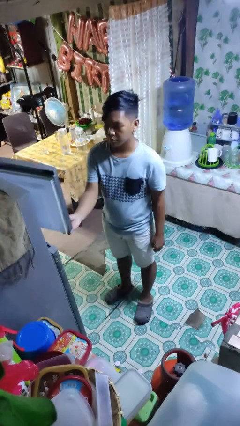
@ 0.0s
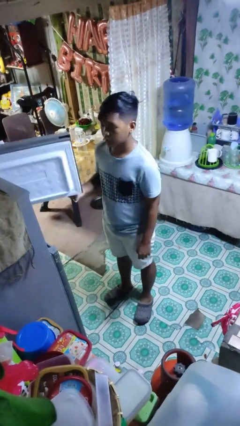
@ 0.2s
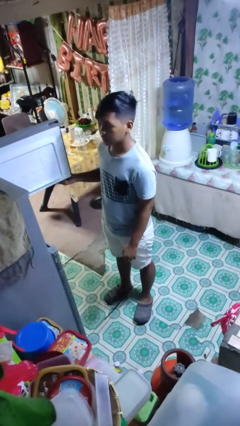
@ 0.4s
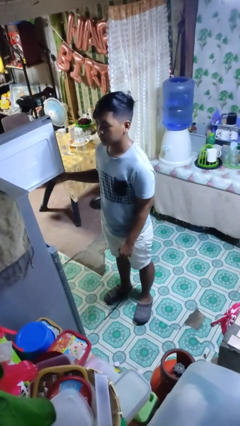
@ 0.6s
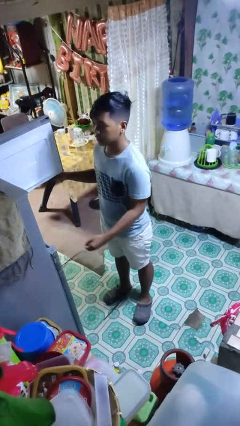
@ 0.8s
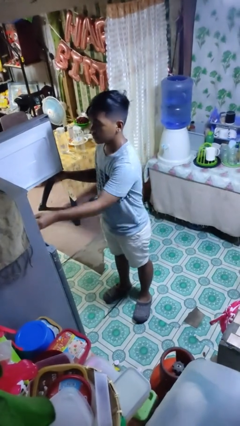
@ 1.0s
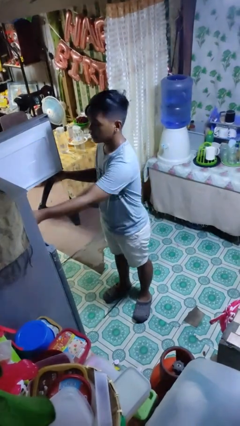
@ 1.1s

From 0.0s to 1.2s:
person opens refrigerator

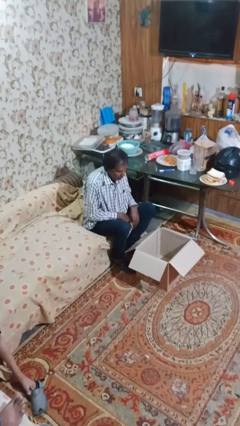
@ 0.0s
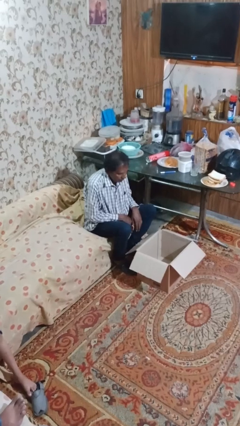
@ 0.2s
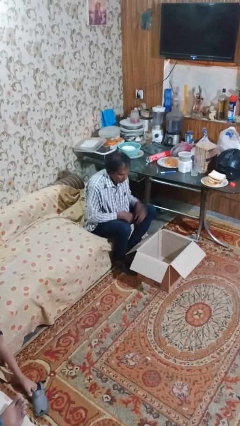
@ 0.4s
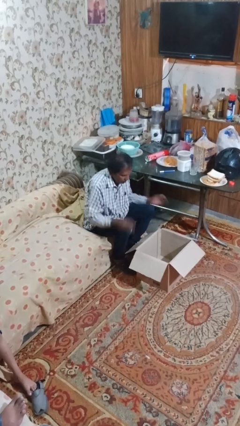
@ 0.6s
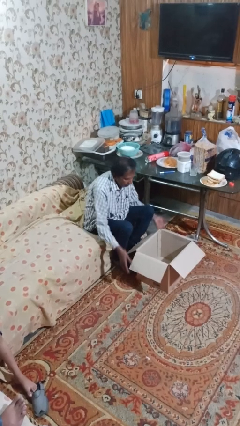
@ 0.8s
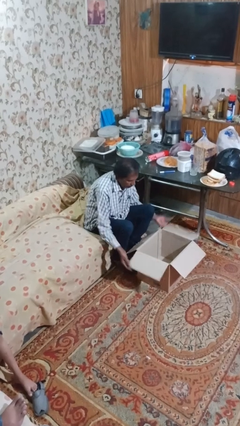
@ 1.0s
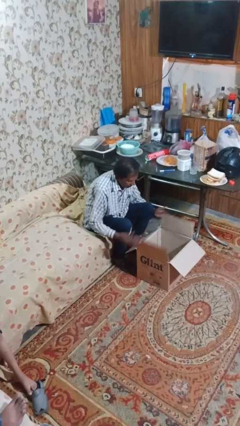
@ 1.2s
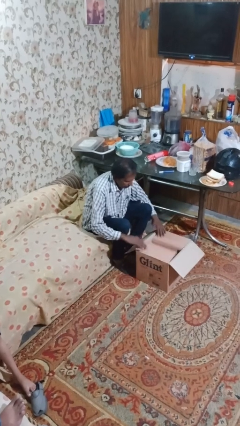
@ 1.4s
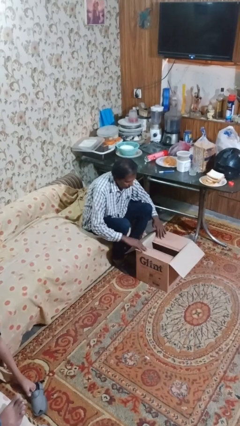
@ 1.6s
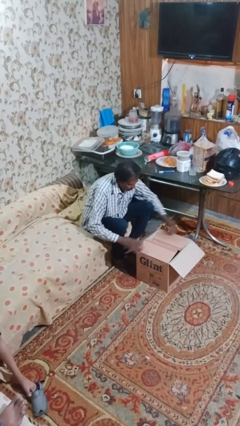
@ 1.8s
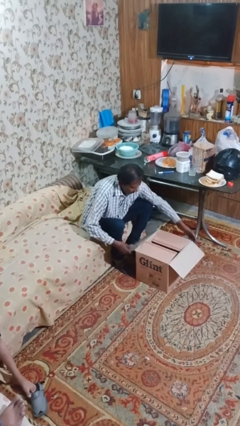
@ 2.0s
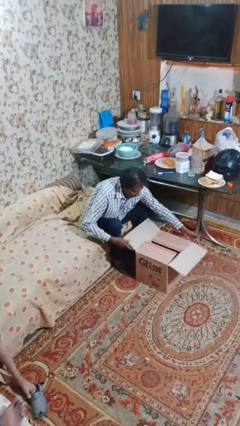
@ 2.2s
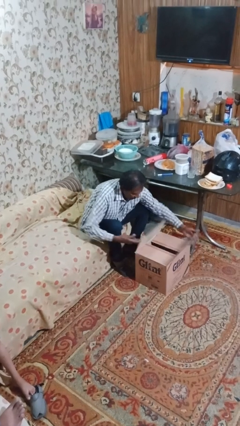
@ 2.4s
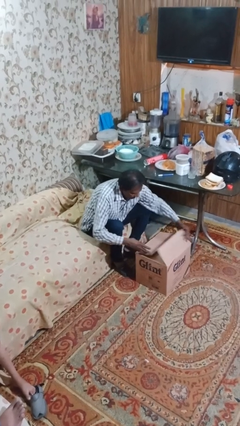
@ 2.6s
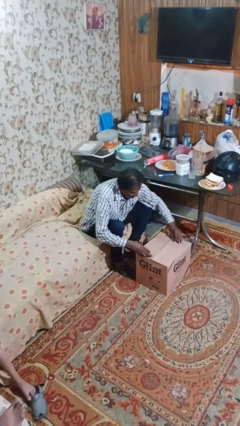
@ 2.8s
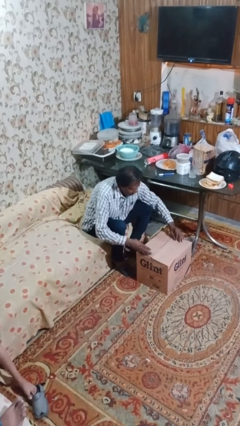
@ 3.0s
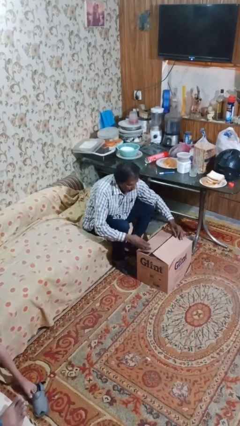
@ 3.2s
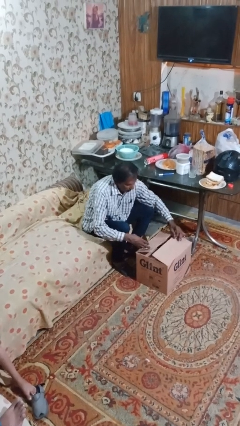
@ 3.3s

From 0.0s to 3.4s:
person closes box

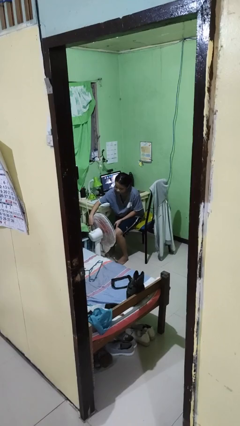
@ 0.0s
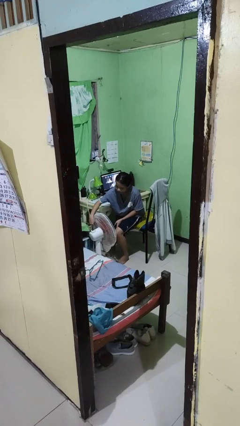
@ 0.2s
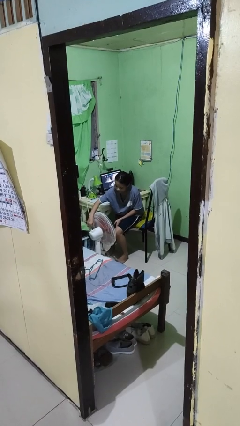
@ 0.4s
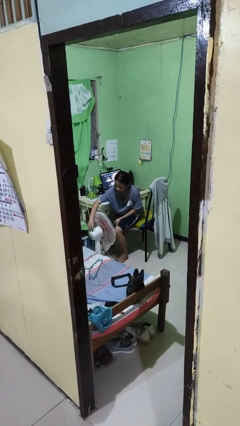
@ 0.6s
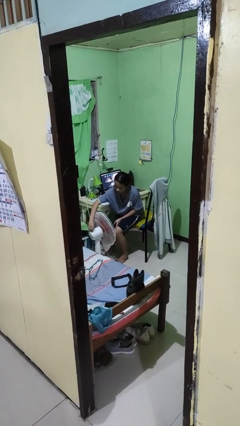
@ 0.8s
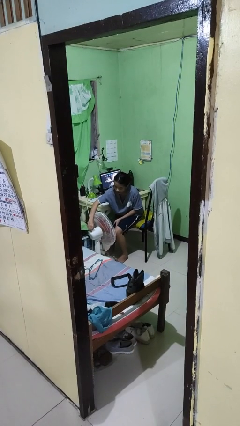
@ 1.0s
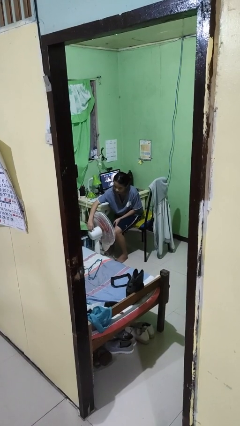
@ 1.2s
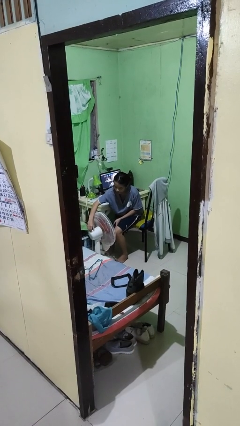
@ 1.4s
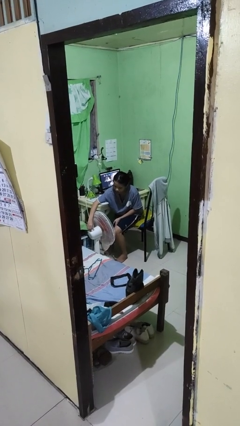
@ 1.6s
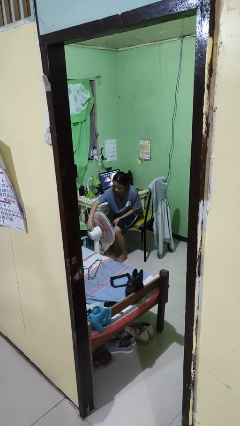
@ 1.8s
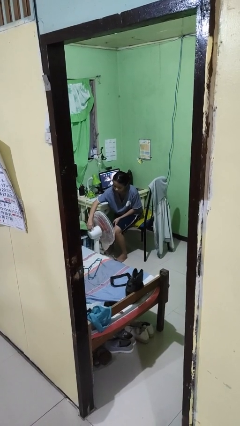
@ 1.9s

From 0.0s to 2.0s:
person turns on fan

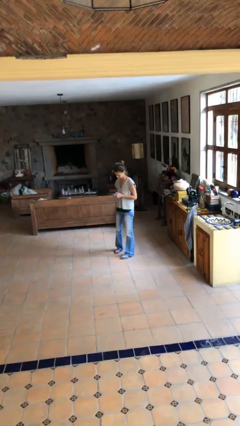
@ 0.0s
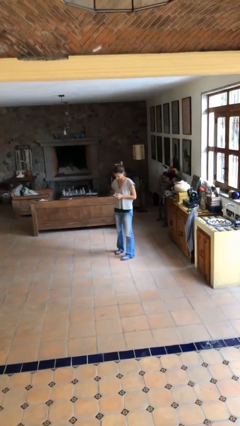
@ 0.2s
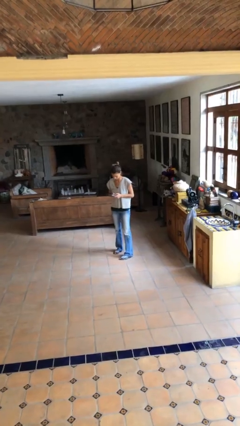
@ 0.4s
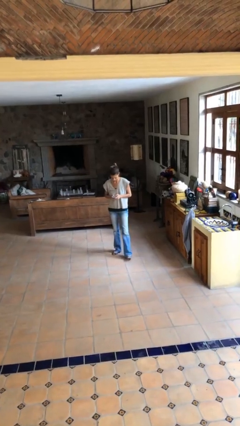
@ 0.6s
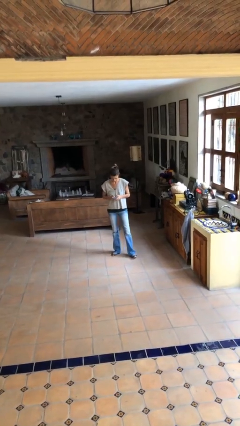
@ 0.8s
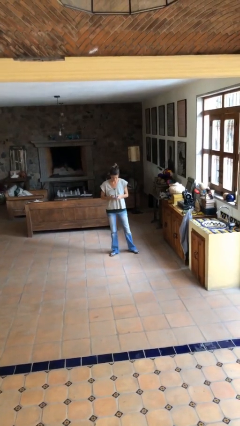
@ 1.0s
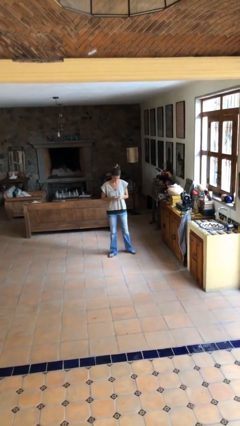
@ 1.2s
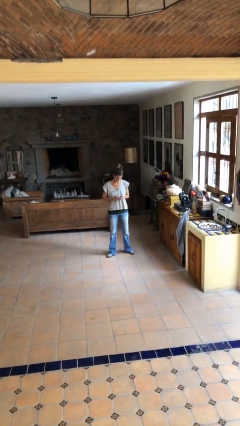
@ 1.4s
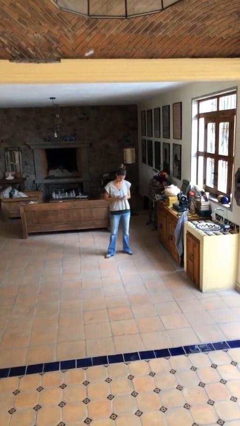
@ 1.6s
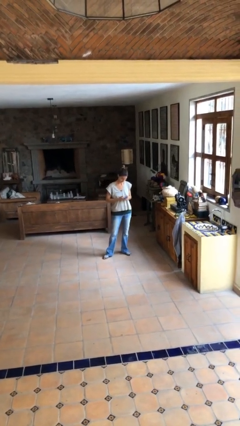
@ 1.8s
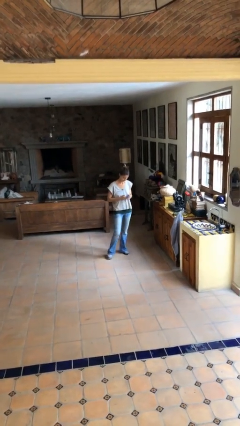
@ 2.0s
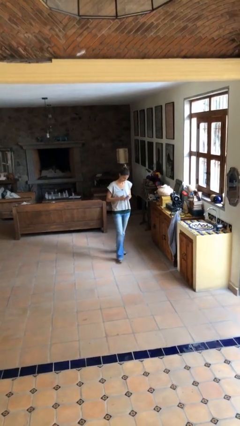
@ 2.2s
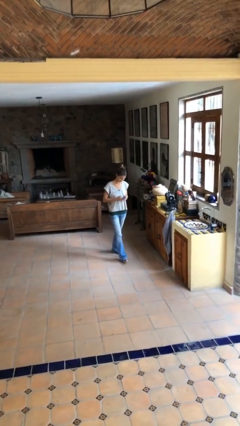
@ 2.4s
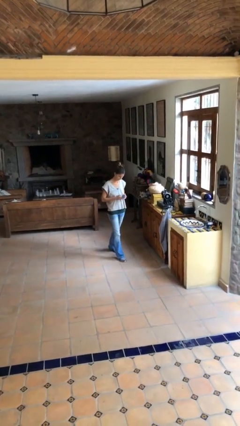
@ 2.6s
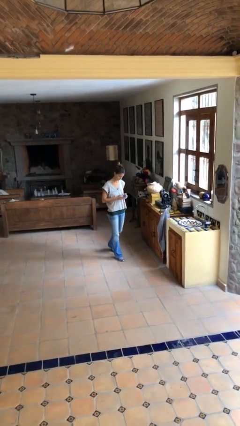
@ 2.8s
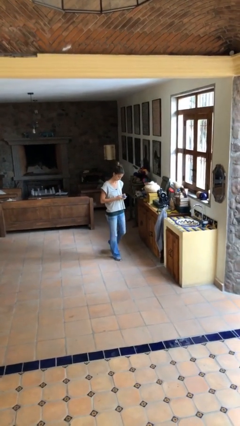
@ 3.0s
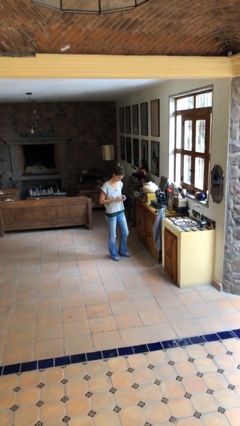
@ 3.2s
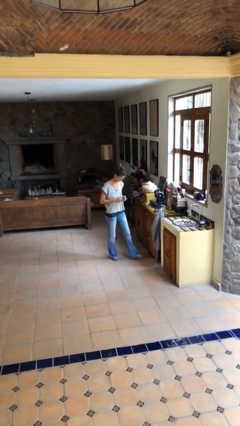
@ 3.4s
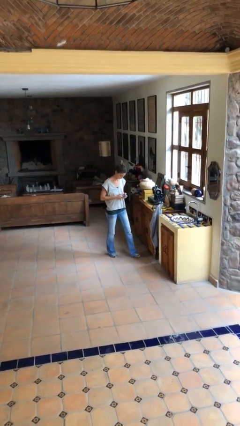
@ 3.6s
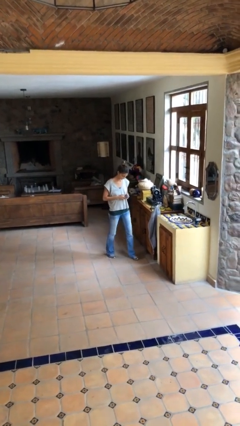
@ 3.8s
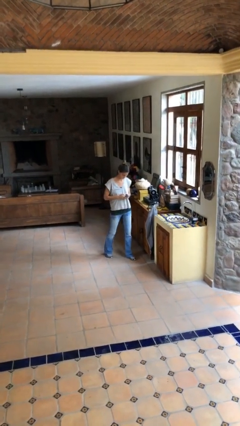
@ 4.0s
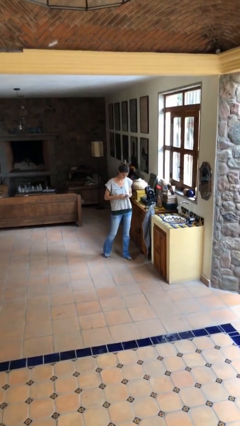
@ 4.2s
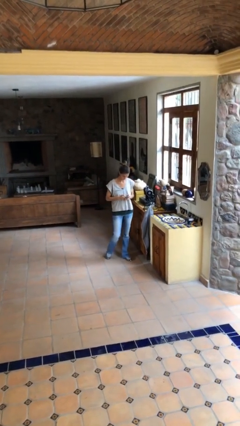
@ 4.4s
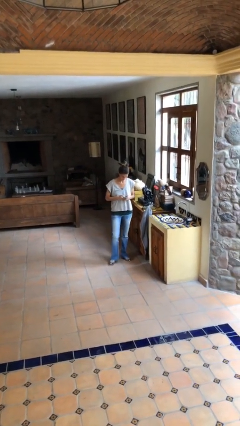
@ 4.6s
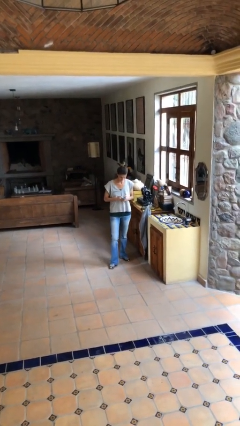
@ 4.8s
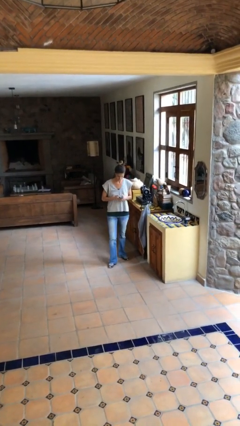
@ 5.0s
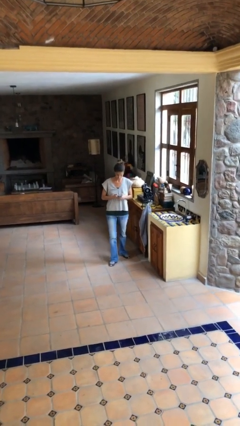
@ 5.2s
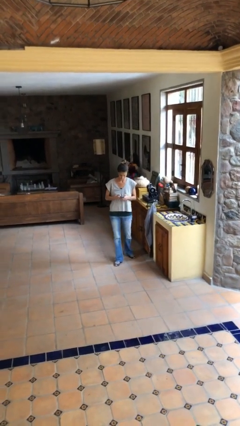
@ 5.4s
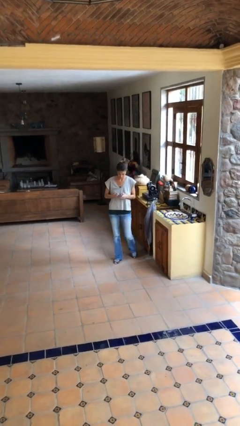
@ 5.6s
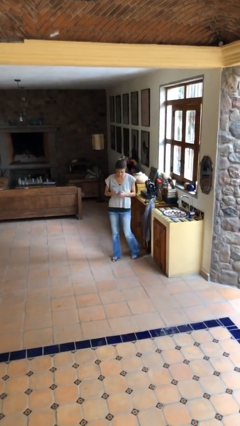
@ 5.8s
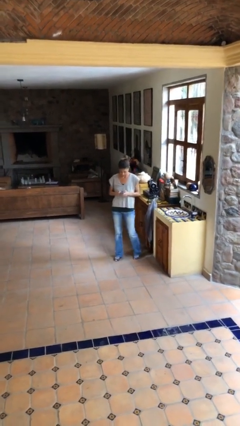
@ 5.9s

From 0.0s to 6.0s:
person texts on phone

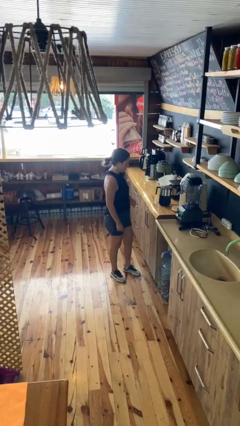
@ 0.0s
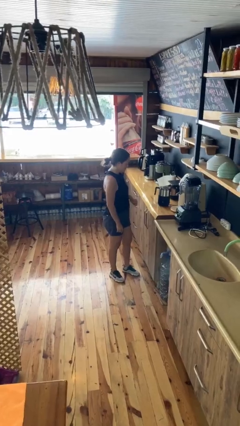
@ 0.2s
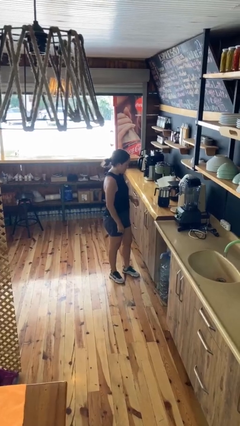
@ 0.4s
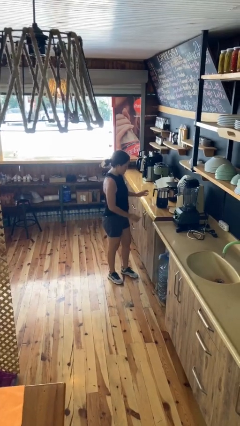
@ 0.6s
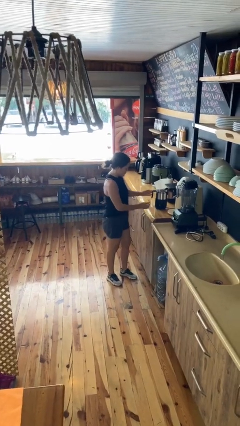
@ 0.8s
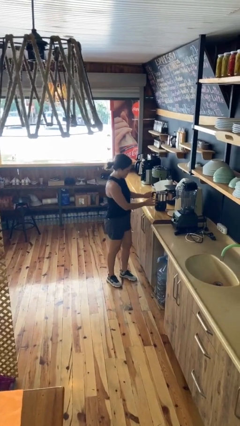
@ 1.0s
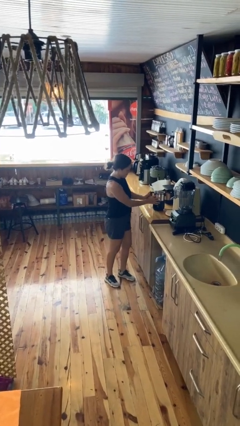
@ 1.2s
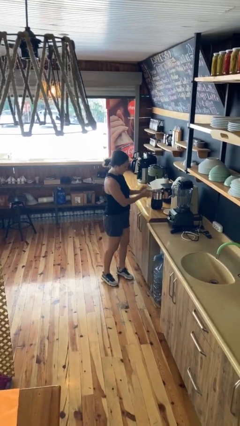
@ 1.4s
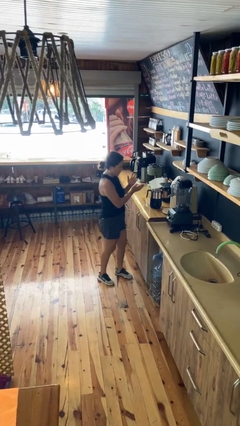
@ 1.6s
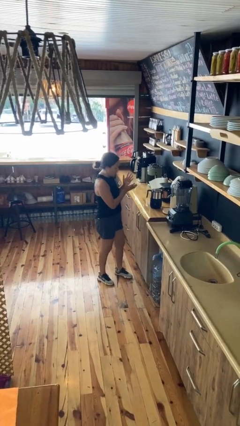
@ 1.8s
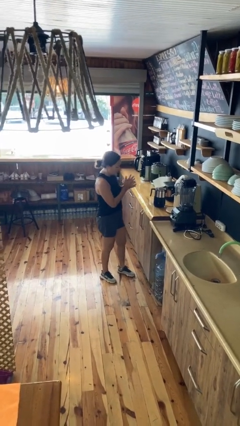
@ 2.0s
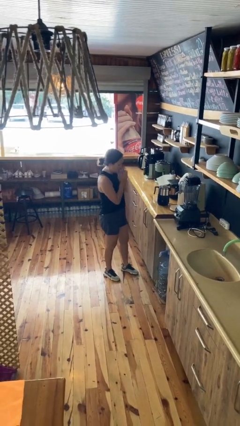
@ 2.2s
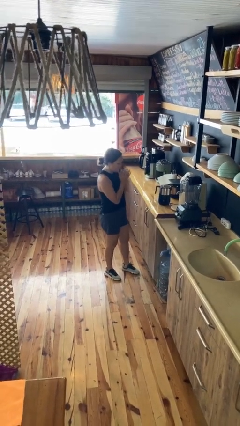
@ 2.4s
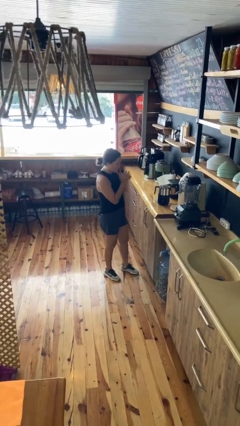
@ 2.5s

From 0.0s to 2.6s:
person burns hand

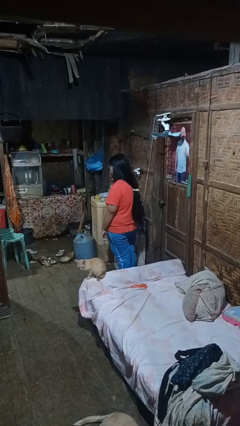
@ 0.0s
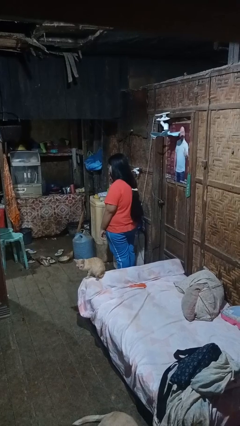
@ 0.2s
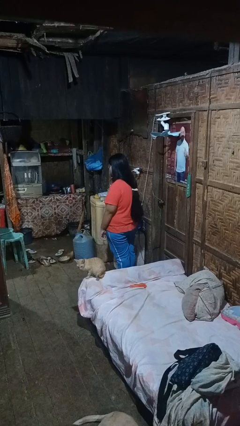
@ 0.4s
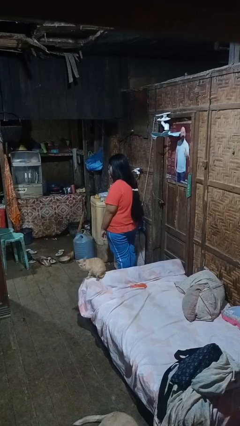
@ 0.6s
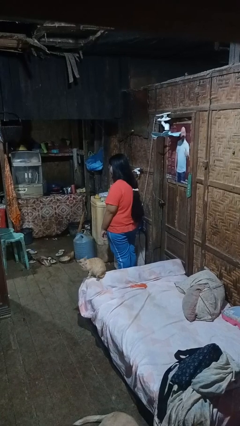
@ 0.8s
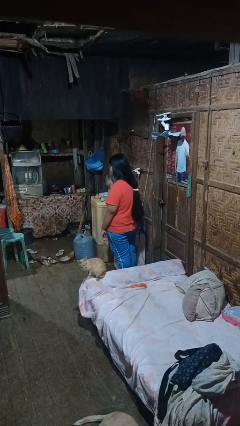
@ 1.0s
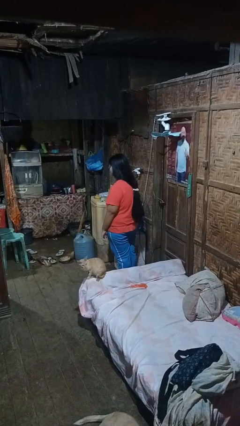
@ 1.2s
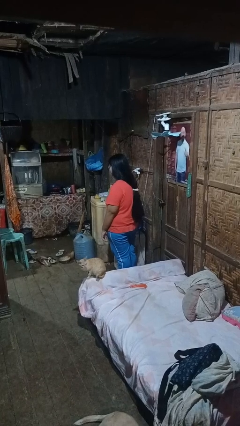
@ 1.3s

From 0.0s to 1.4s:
person licks fingers

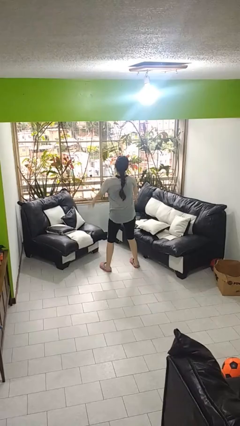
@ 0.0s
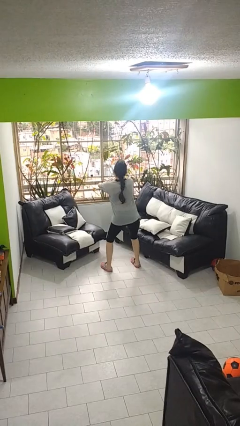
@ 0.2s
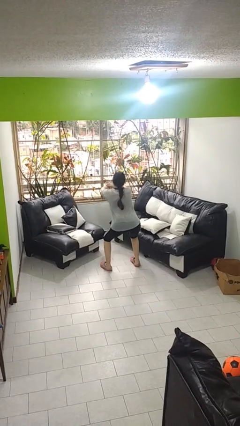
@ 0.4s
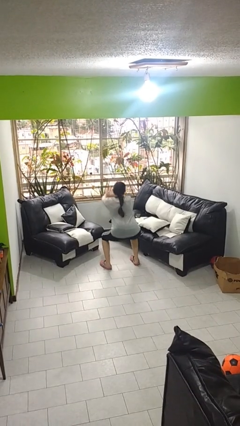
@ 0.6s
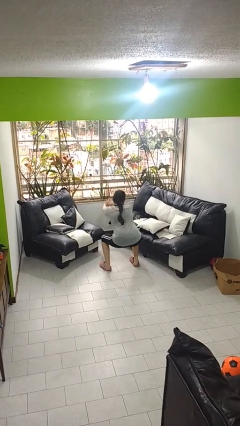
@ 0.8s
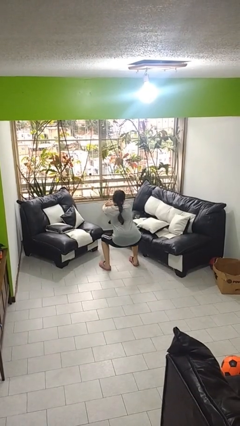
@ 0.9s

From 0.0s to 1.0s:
person squats
